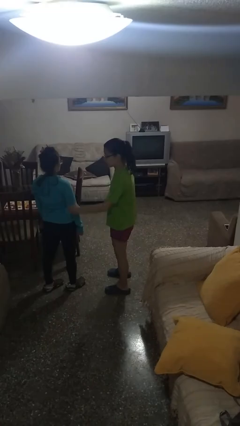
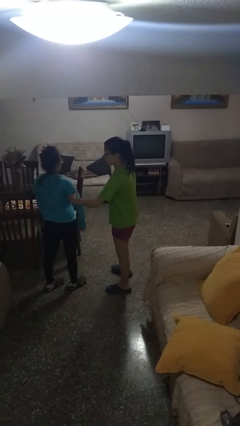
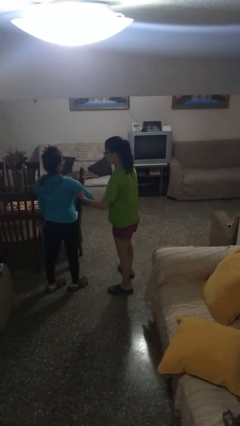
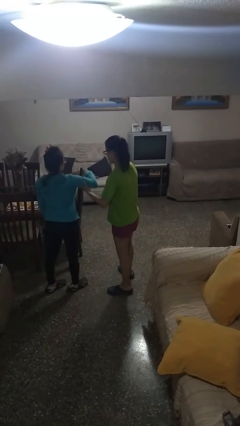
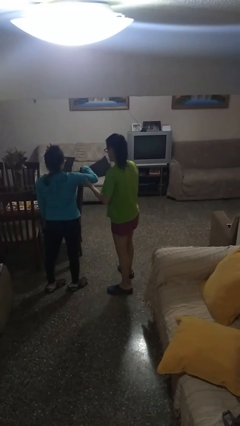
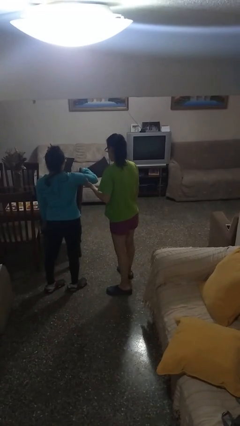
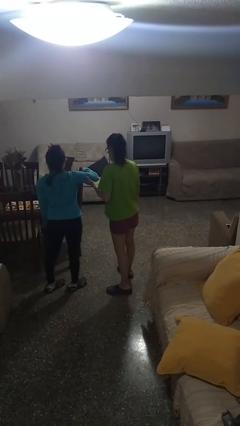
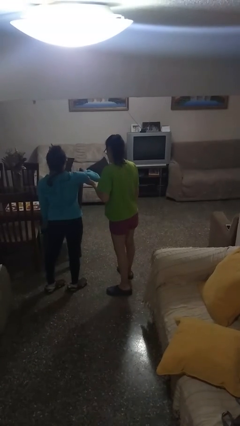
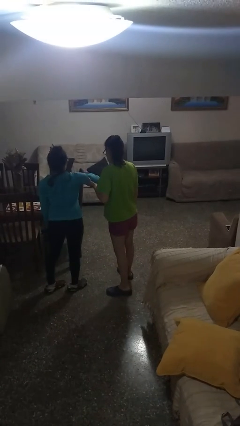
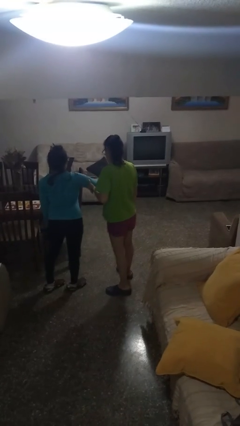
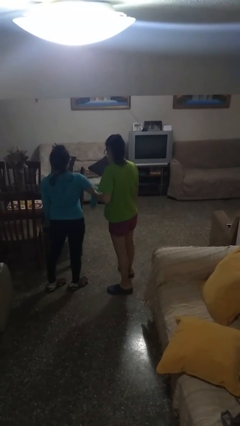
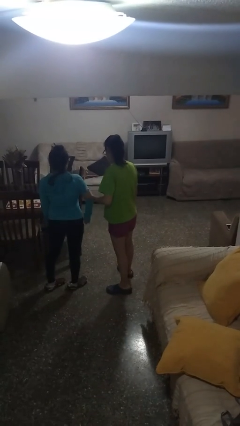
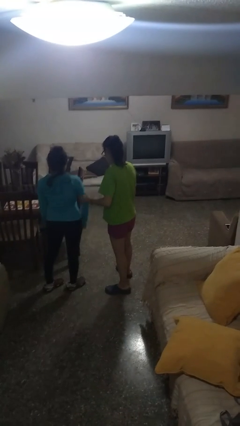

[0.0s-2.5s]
person grabs person by bicep

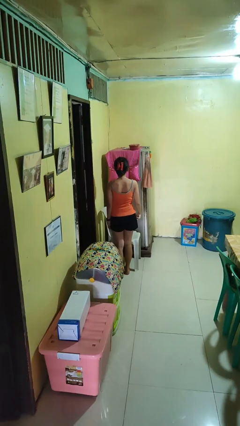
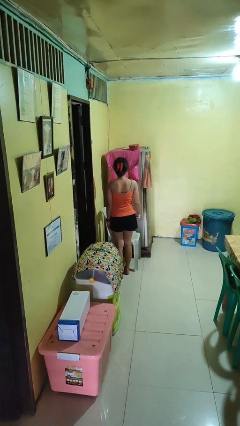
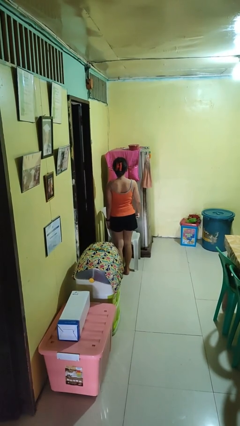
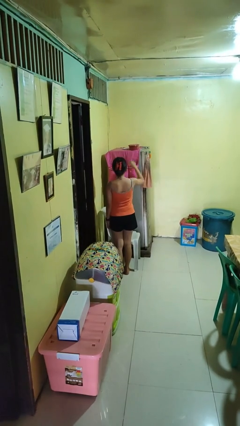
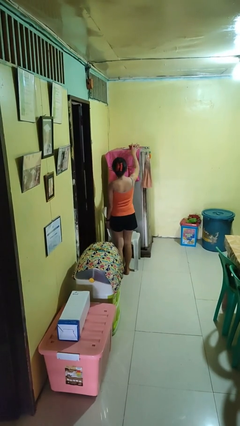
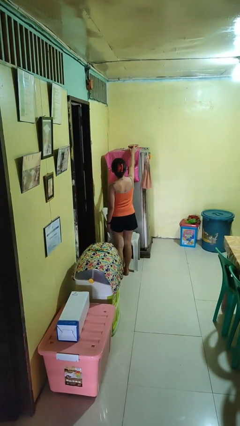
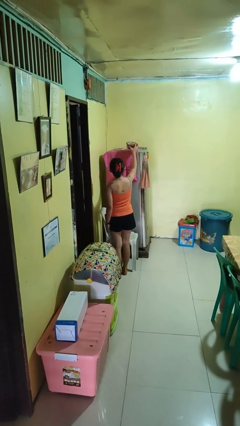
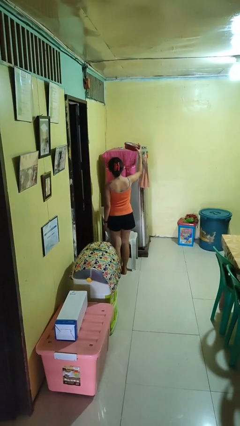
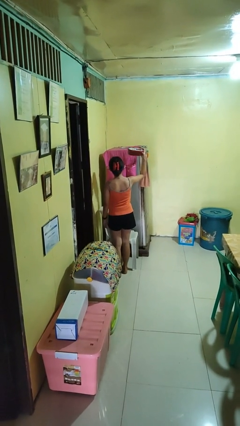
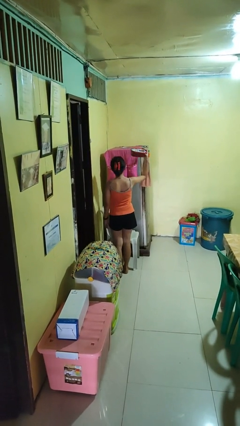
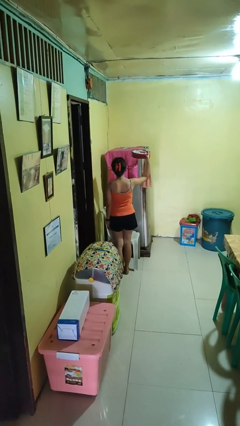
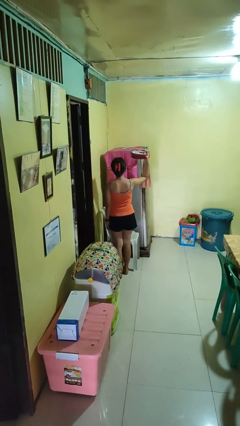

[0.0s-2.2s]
person picks up object from shelf

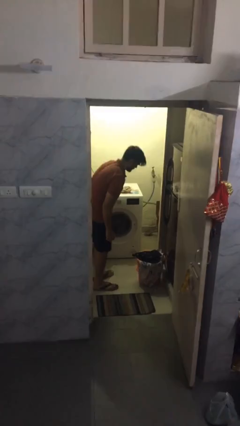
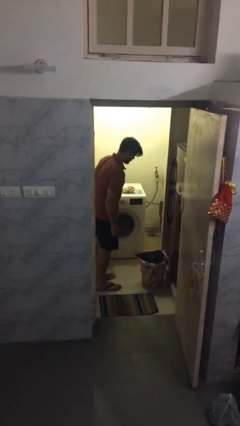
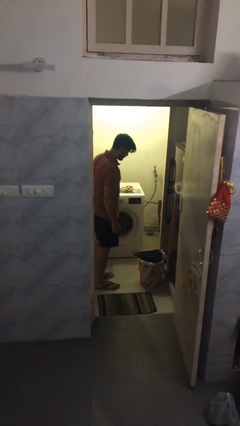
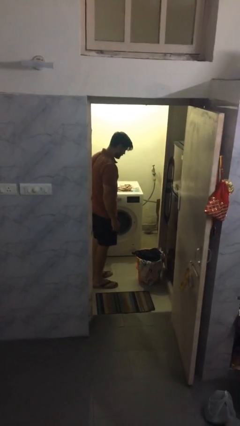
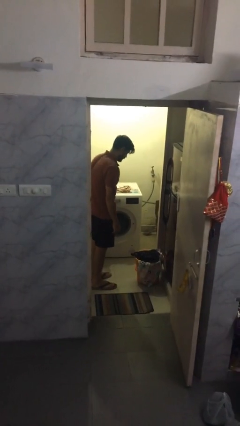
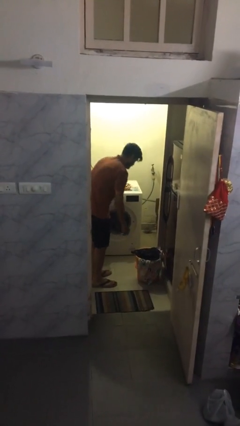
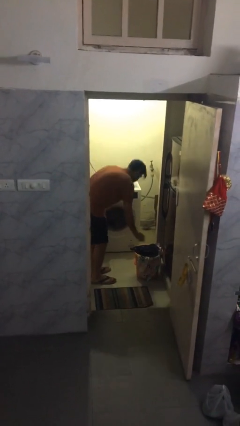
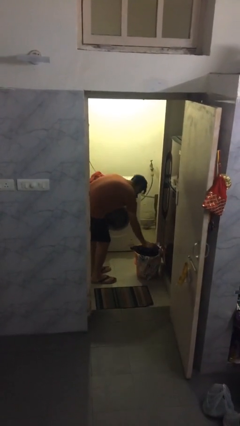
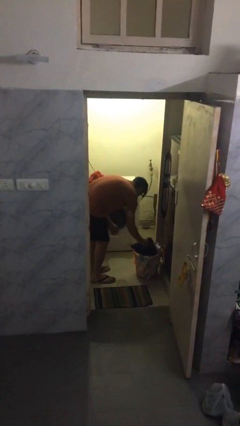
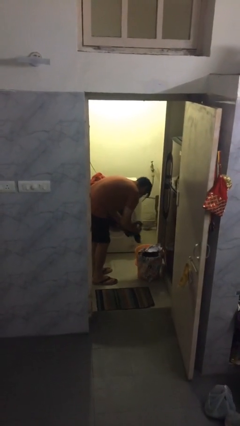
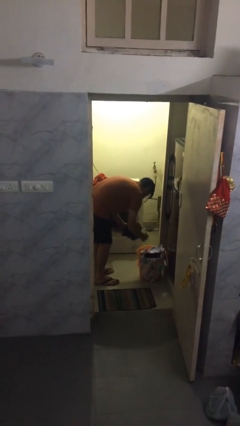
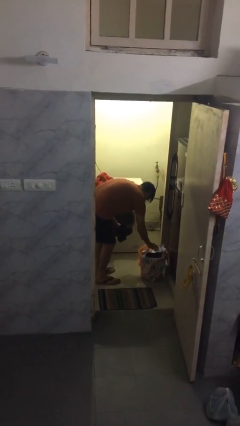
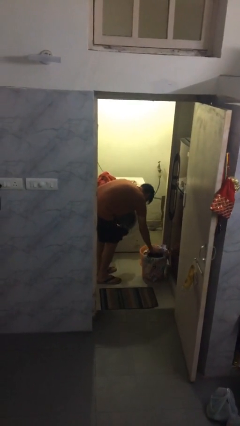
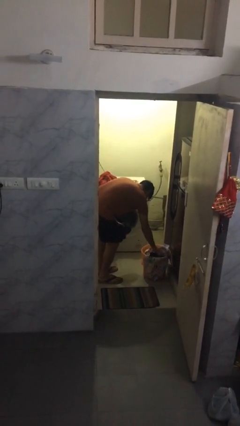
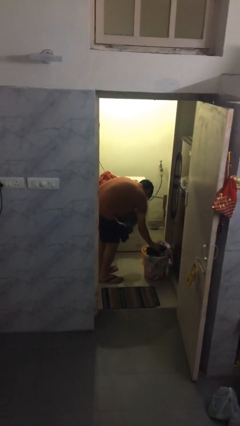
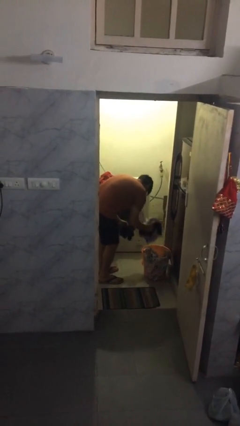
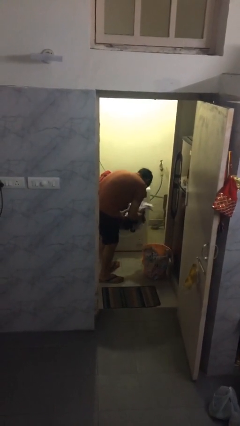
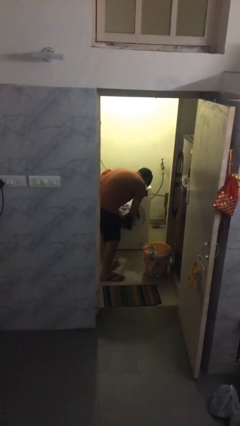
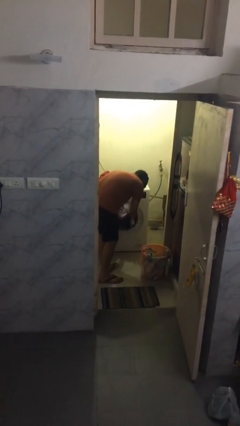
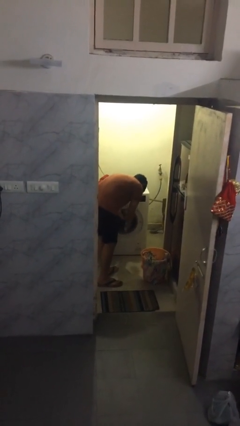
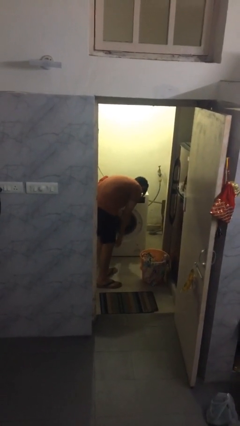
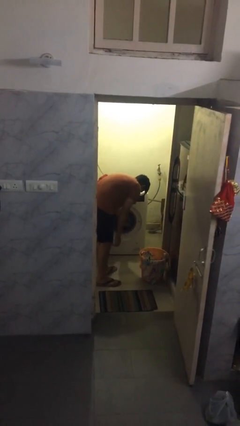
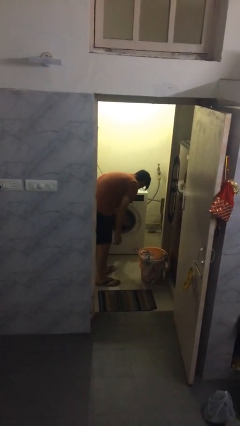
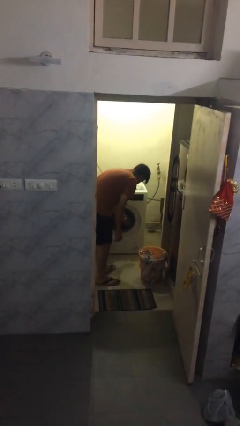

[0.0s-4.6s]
person loads clotheswasher

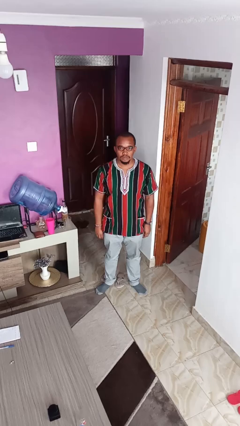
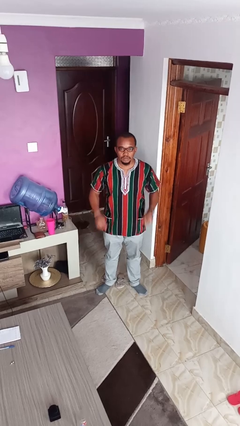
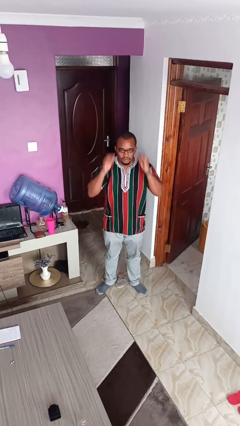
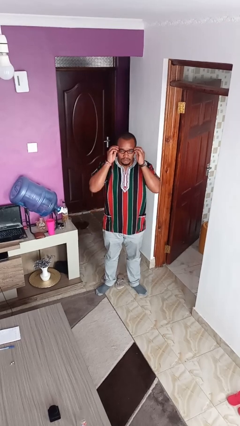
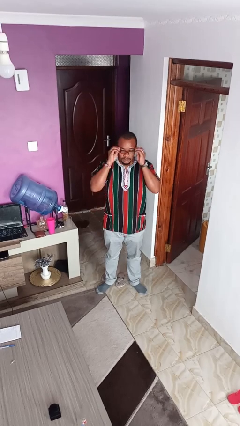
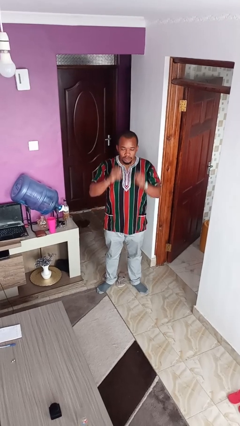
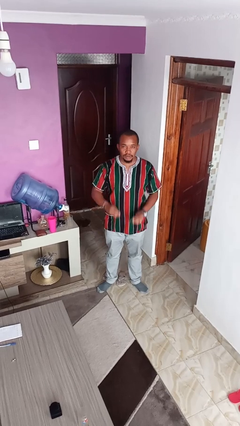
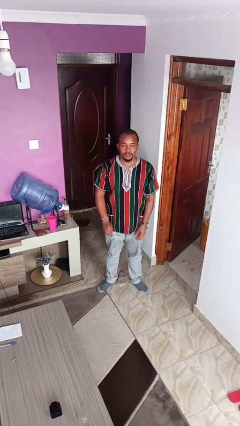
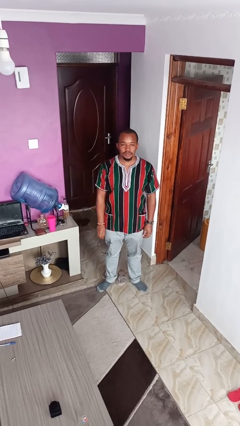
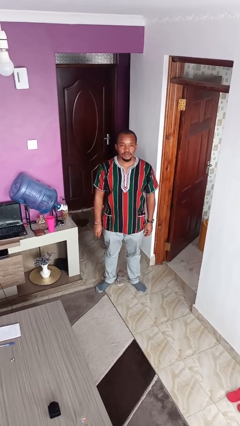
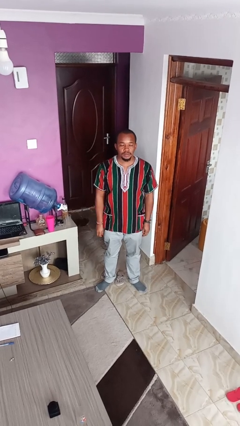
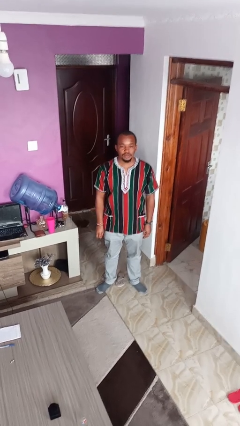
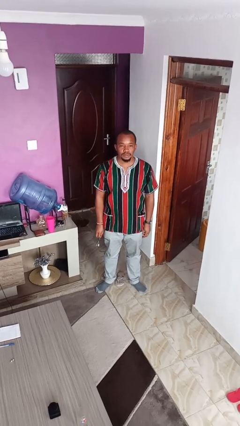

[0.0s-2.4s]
person takes off glasses

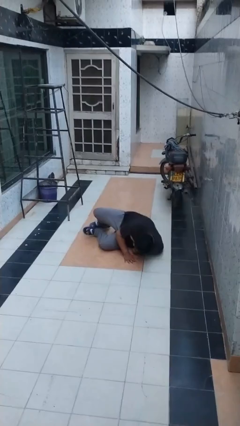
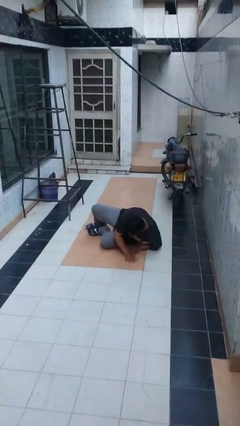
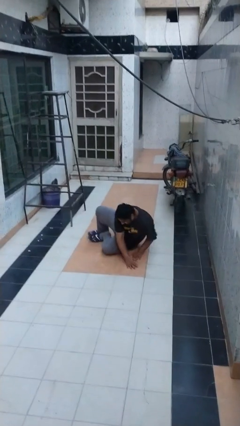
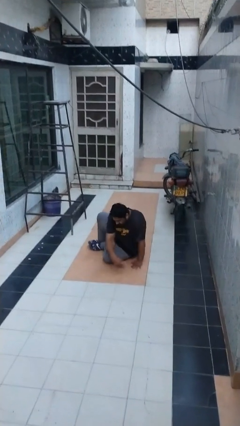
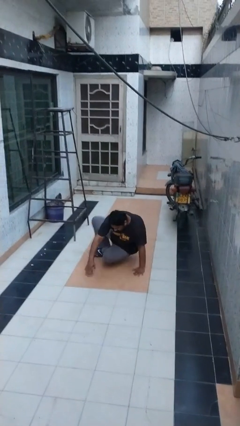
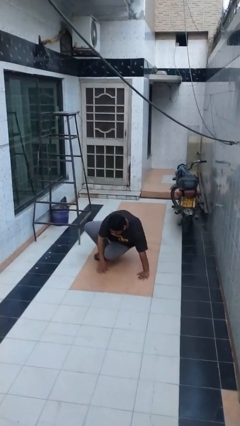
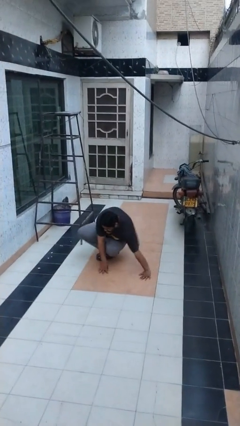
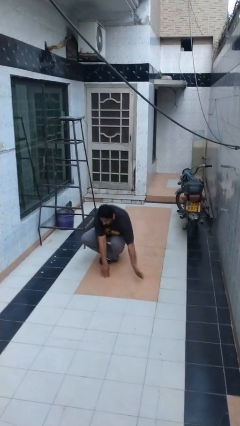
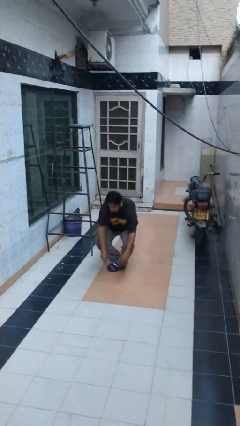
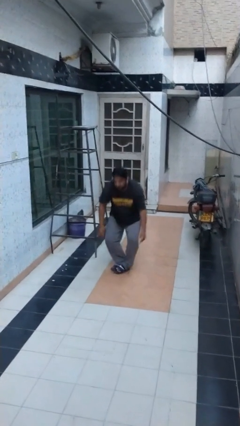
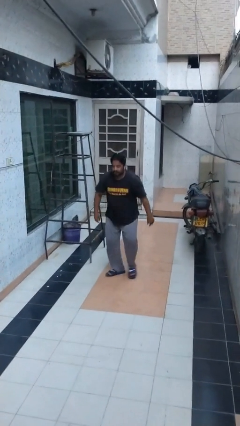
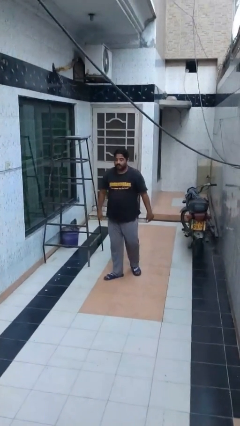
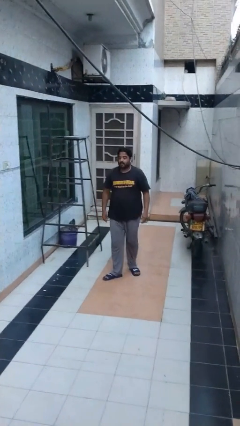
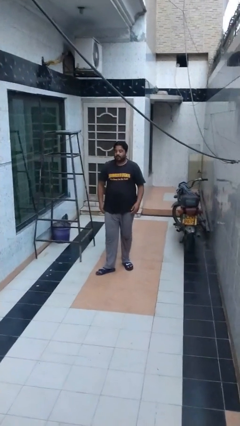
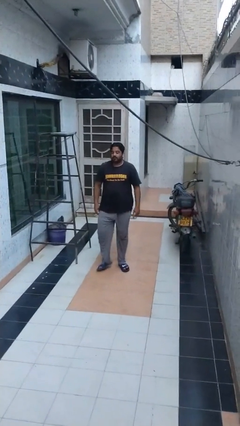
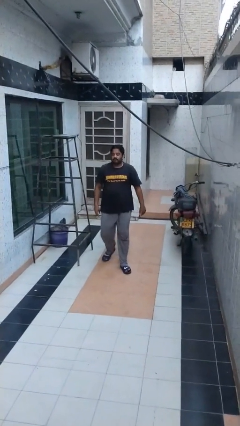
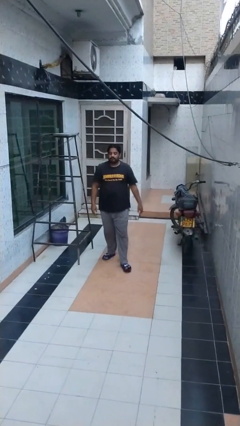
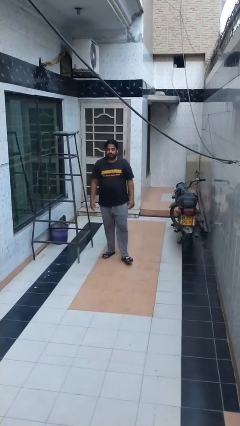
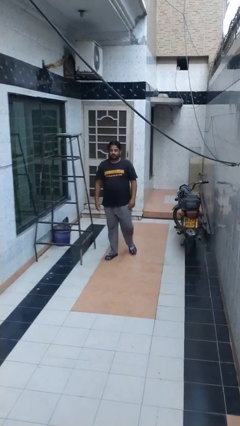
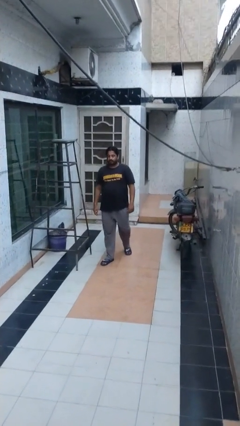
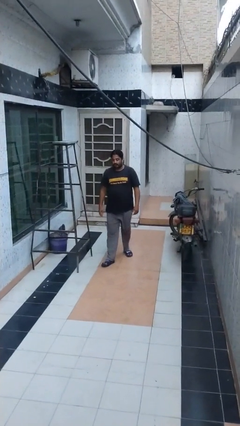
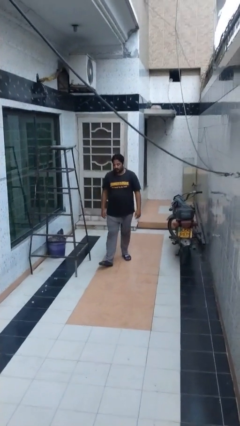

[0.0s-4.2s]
person stands up from floor

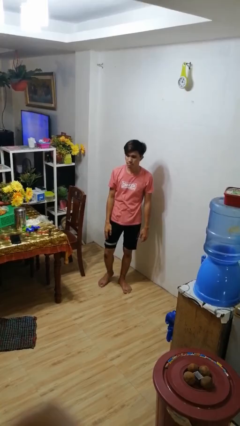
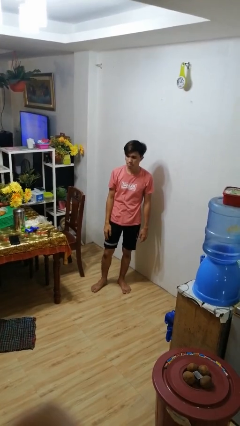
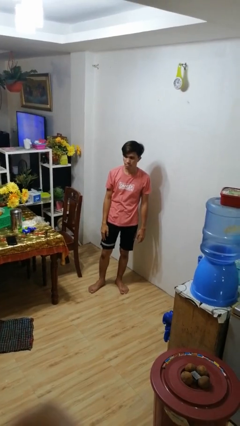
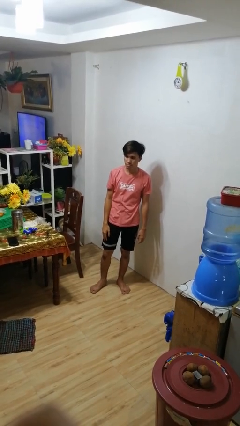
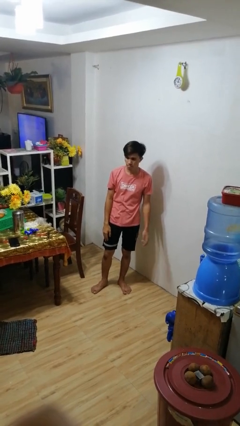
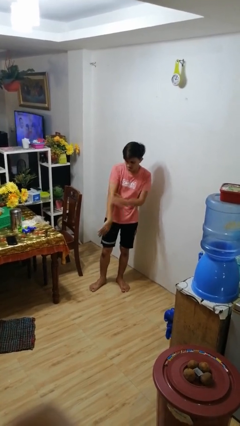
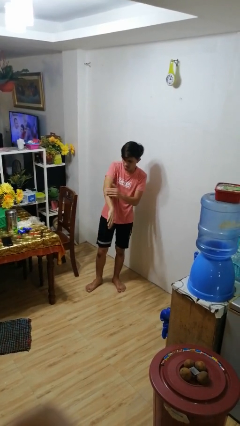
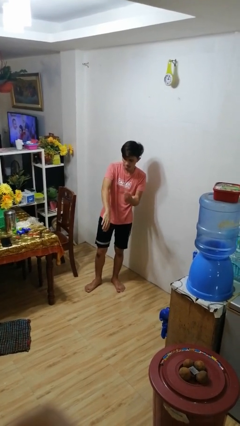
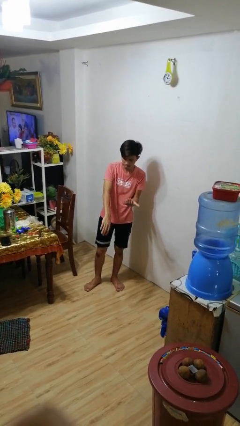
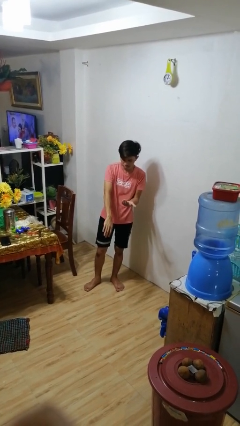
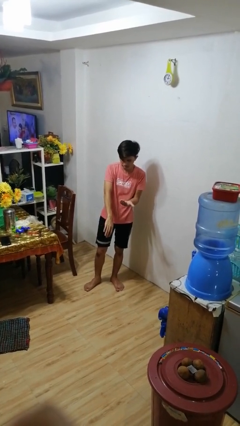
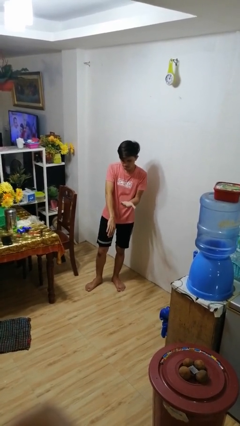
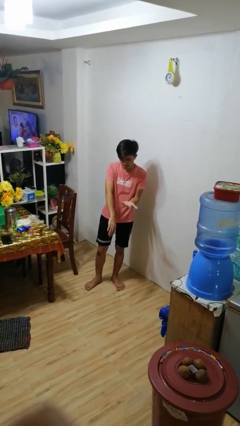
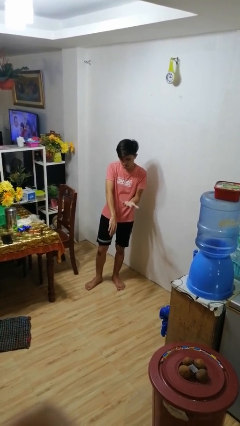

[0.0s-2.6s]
person swats bug
